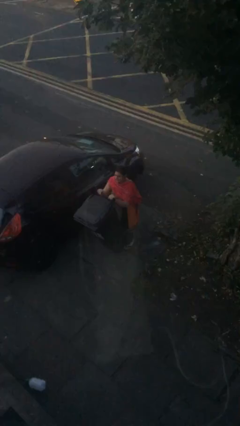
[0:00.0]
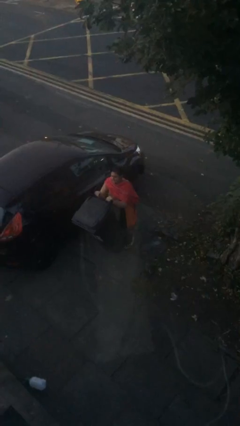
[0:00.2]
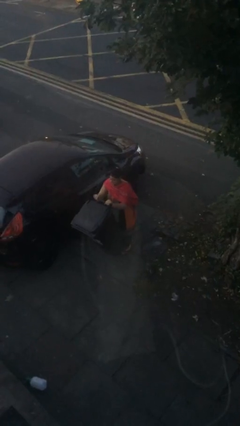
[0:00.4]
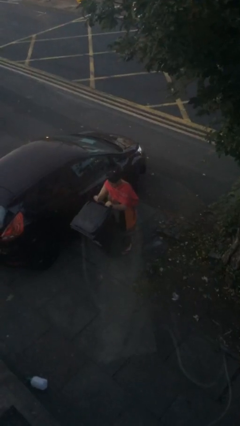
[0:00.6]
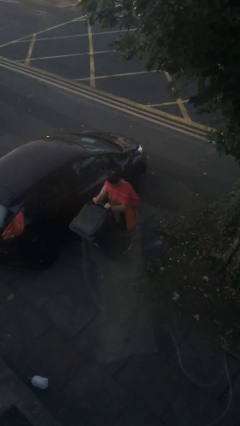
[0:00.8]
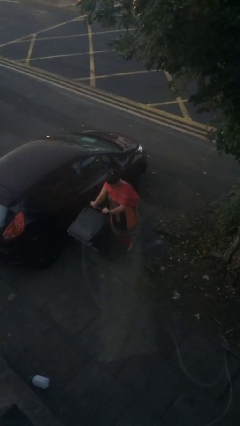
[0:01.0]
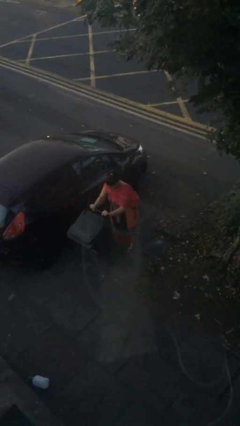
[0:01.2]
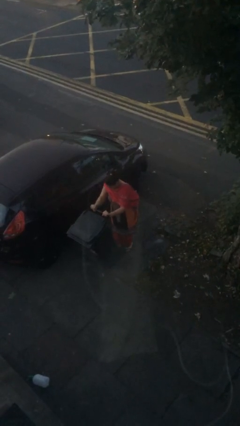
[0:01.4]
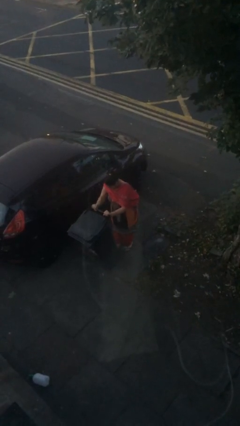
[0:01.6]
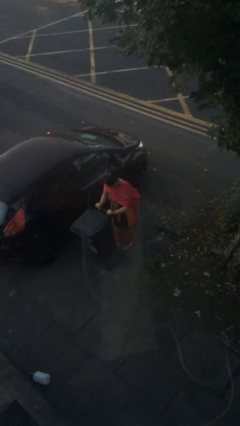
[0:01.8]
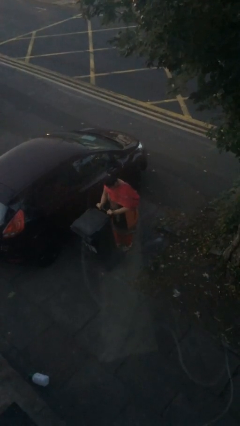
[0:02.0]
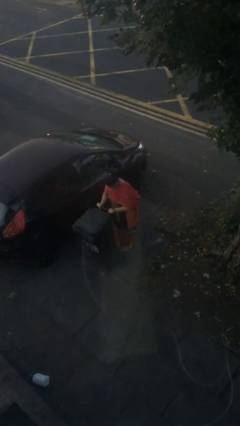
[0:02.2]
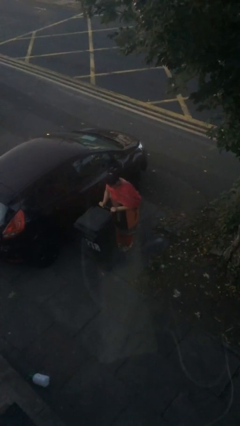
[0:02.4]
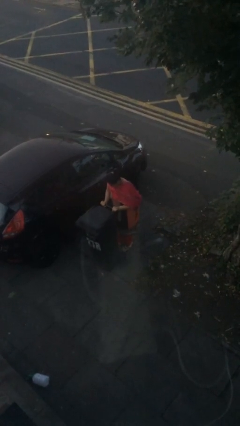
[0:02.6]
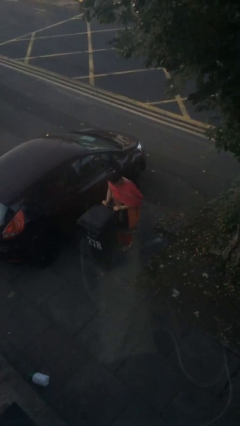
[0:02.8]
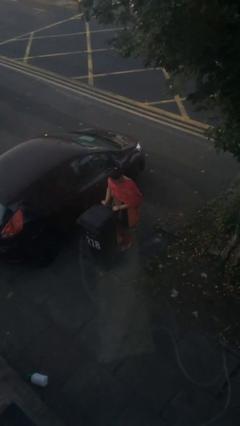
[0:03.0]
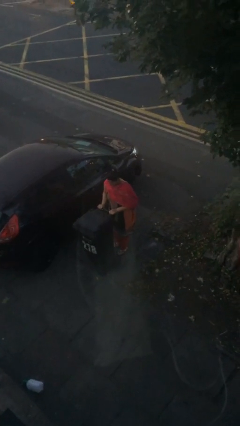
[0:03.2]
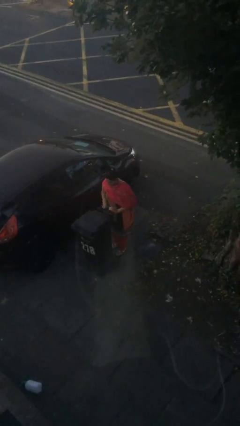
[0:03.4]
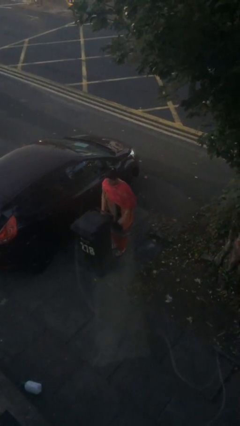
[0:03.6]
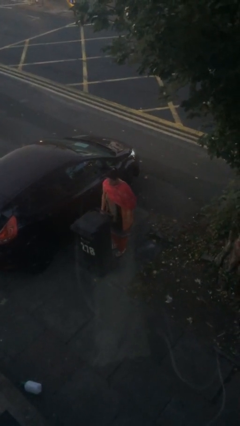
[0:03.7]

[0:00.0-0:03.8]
person puts down object on floor

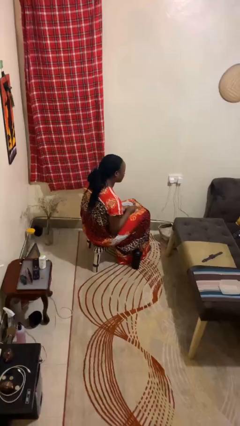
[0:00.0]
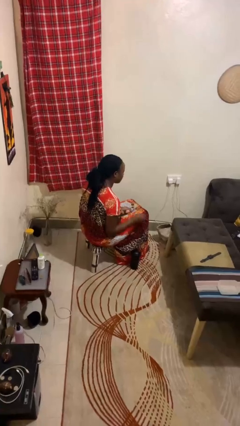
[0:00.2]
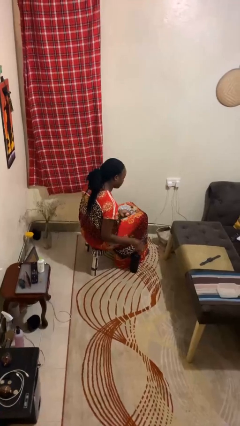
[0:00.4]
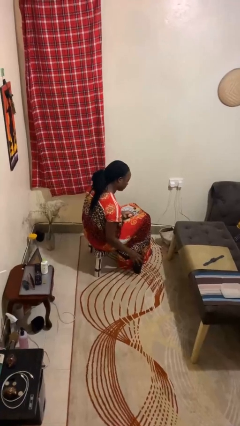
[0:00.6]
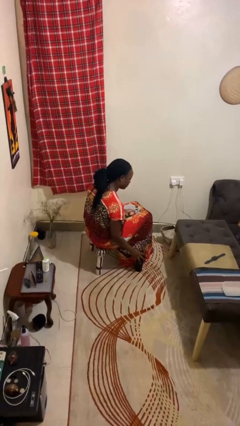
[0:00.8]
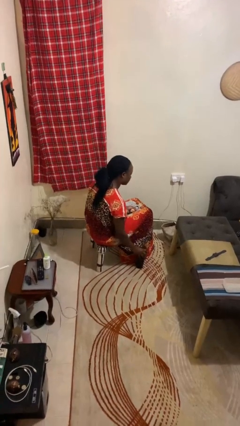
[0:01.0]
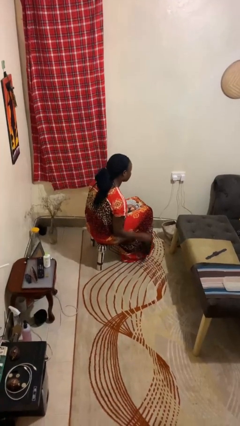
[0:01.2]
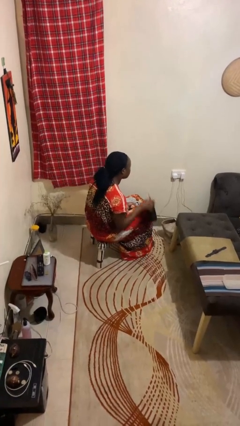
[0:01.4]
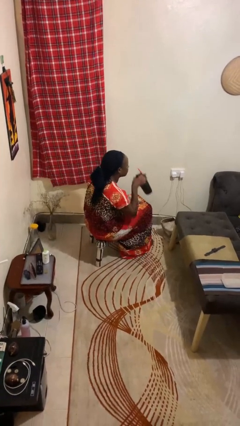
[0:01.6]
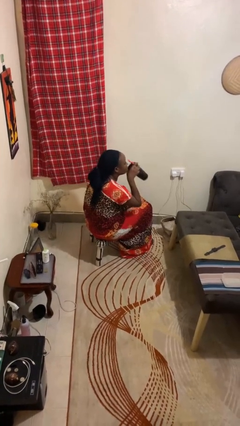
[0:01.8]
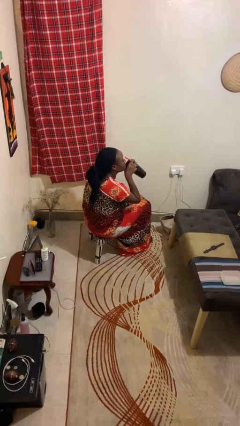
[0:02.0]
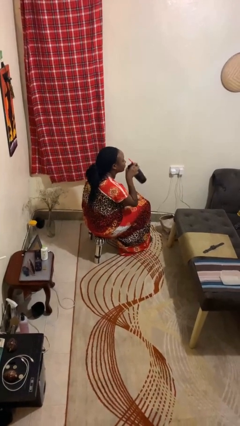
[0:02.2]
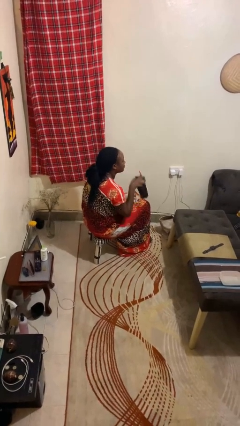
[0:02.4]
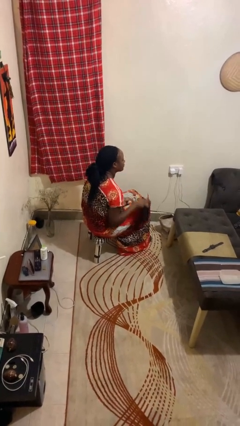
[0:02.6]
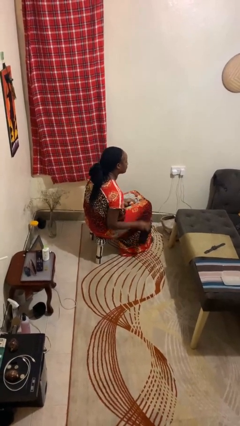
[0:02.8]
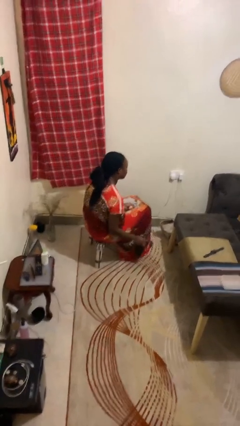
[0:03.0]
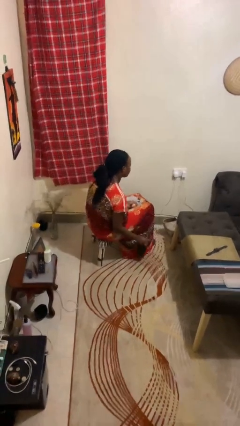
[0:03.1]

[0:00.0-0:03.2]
person drinks from cup

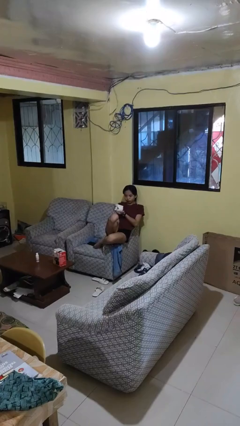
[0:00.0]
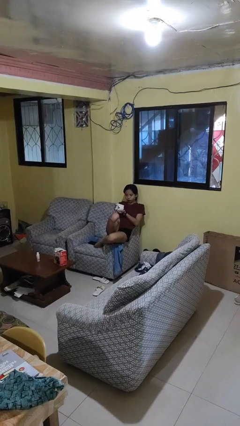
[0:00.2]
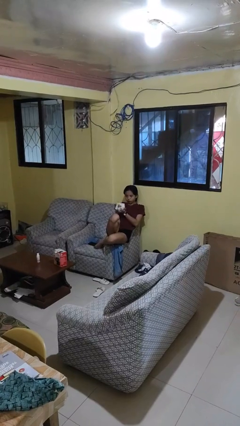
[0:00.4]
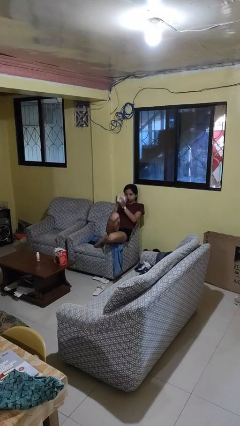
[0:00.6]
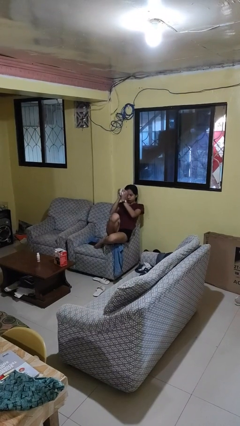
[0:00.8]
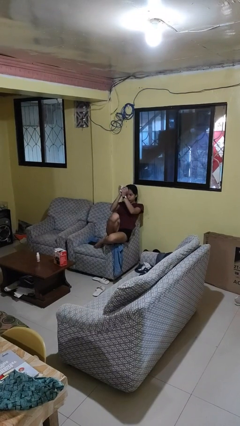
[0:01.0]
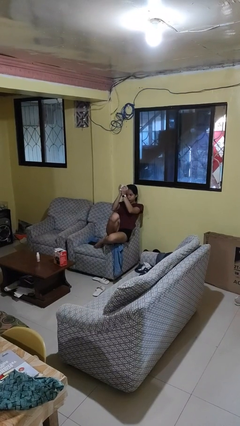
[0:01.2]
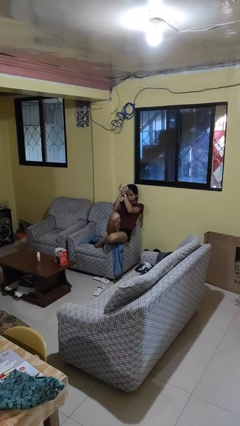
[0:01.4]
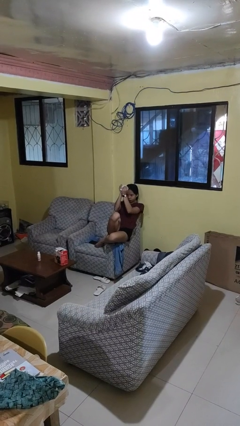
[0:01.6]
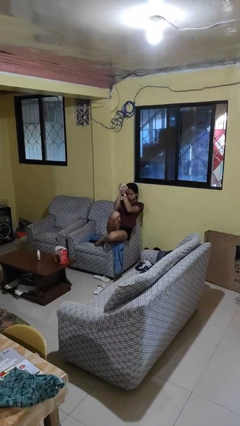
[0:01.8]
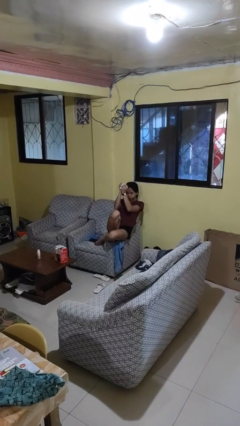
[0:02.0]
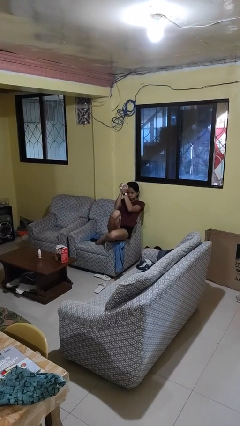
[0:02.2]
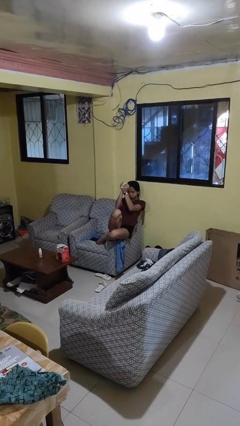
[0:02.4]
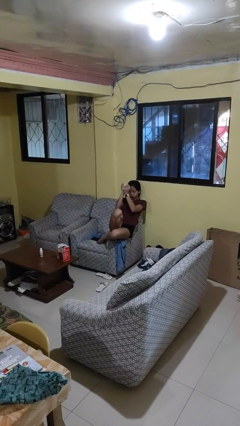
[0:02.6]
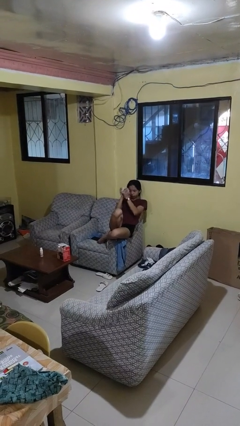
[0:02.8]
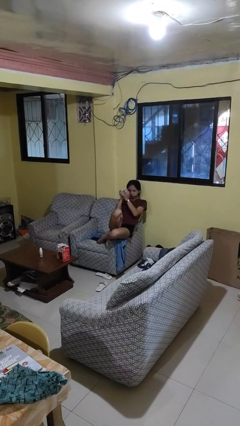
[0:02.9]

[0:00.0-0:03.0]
person squeezes object

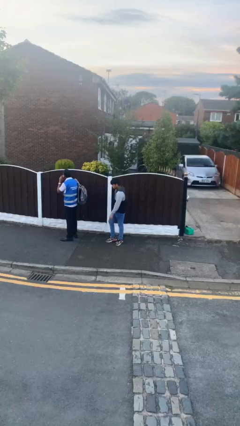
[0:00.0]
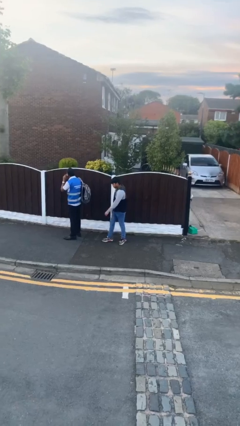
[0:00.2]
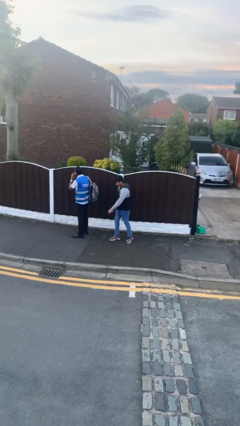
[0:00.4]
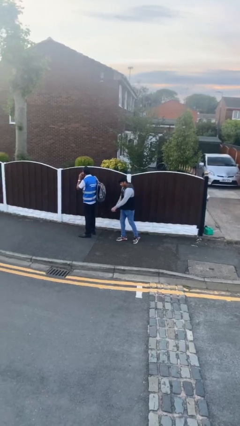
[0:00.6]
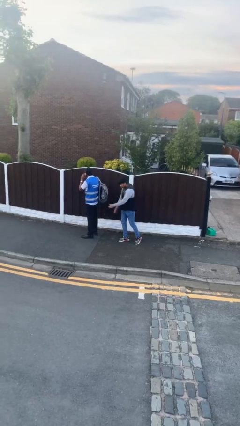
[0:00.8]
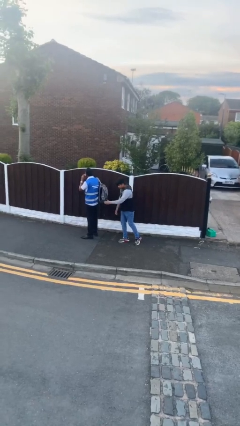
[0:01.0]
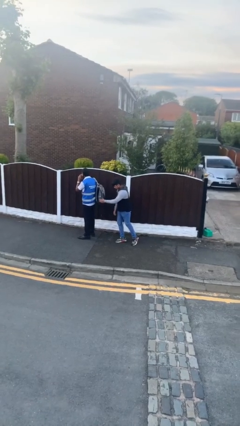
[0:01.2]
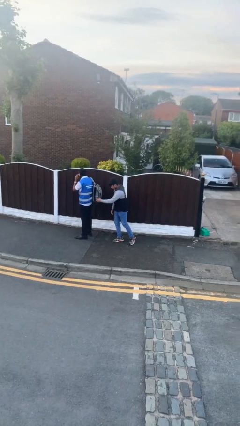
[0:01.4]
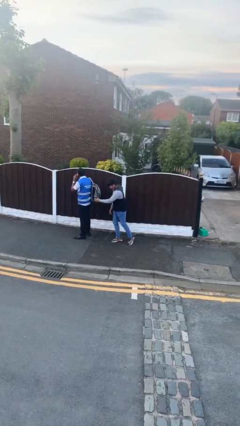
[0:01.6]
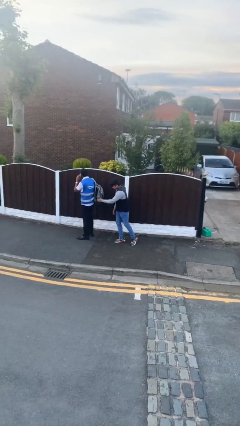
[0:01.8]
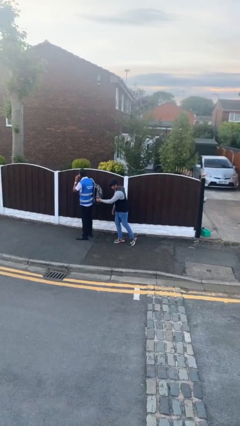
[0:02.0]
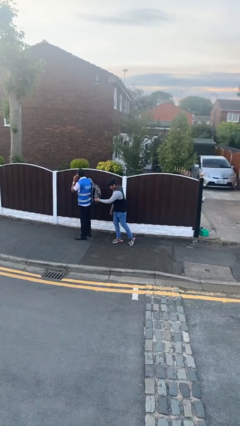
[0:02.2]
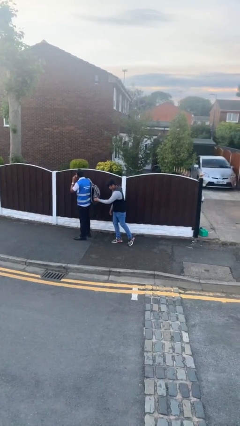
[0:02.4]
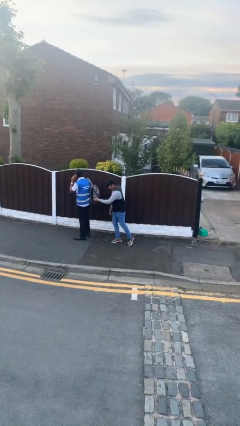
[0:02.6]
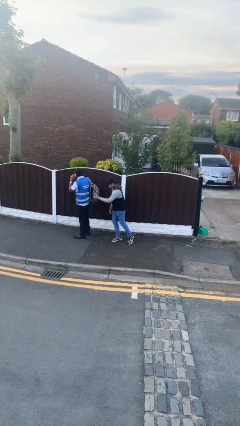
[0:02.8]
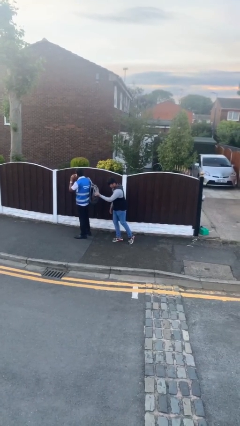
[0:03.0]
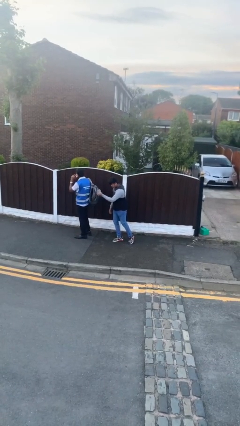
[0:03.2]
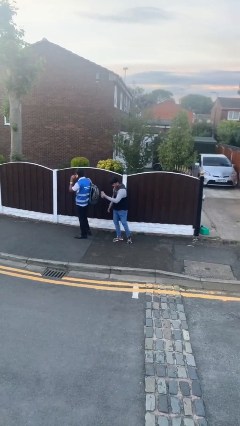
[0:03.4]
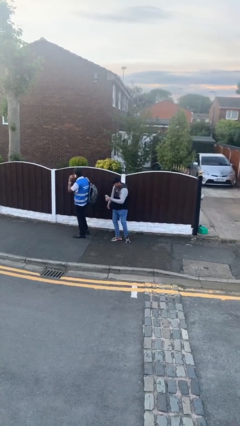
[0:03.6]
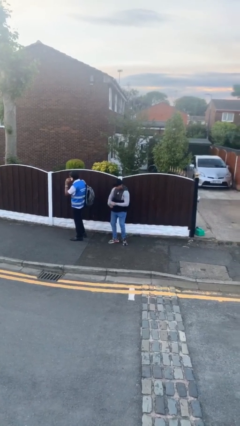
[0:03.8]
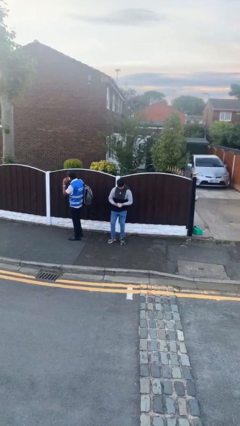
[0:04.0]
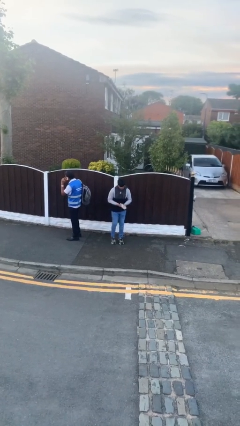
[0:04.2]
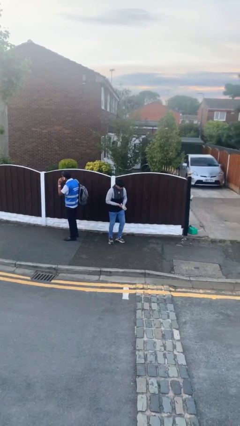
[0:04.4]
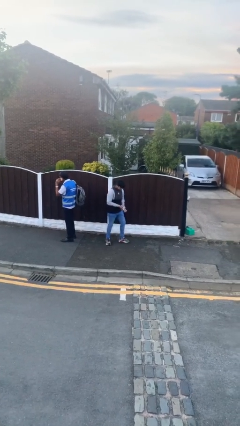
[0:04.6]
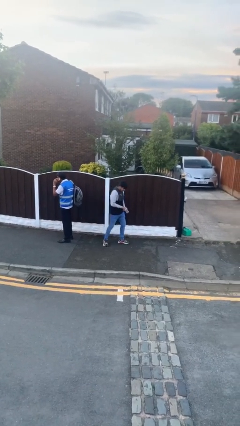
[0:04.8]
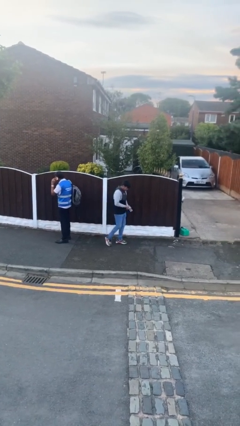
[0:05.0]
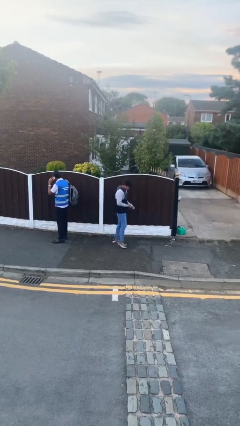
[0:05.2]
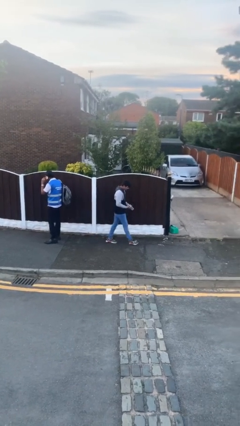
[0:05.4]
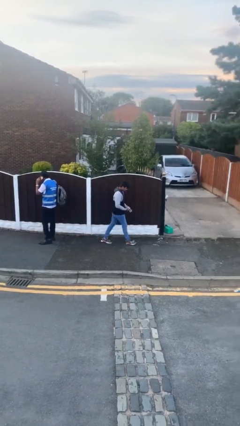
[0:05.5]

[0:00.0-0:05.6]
person steals object from person

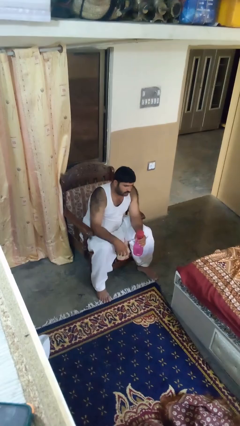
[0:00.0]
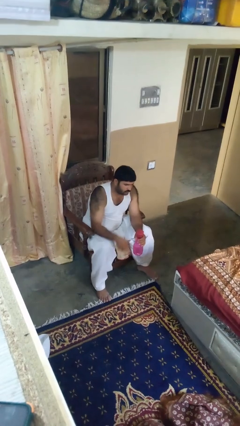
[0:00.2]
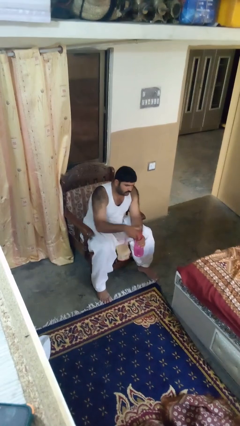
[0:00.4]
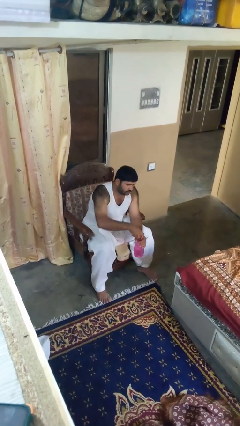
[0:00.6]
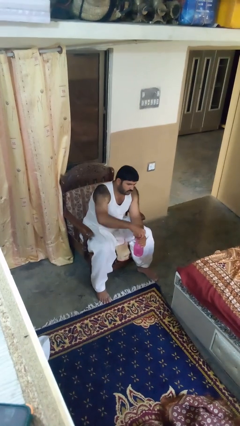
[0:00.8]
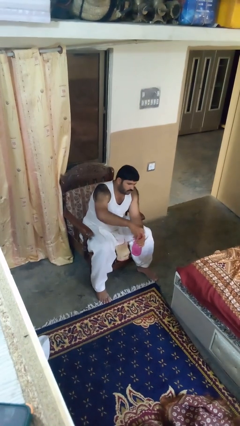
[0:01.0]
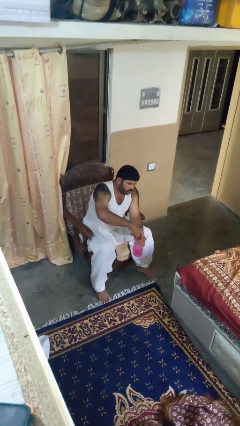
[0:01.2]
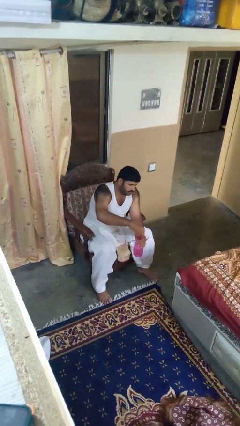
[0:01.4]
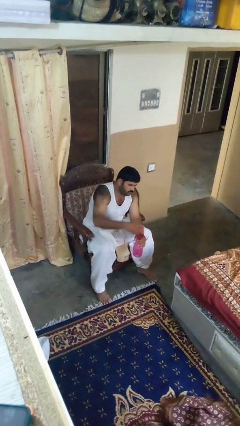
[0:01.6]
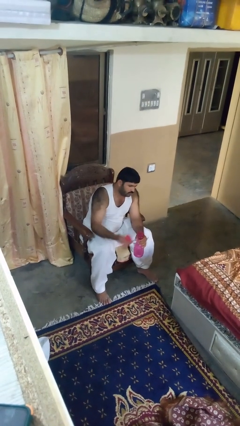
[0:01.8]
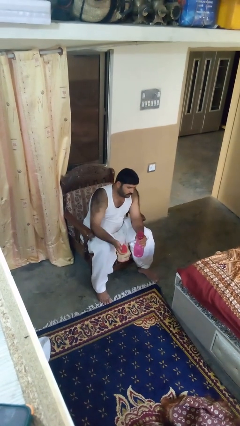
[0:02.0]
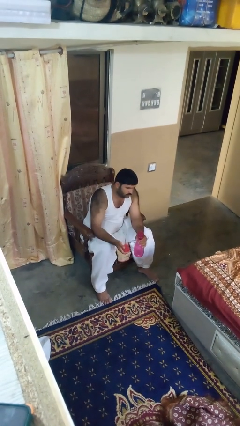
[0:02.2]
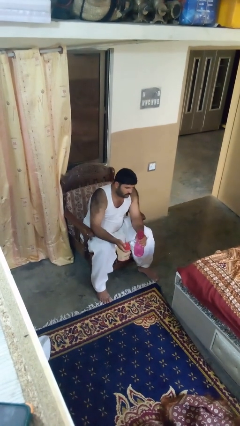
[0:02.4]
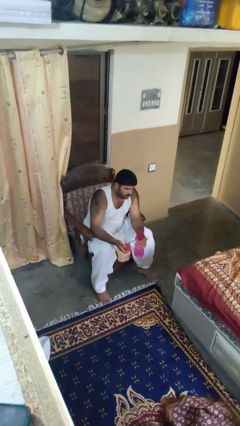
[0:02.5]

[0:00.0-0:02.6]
person unscrews lid from bottle
